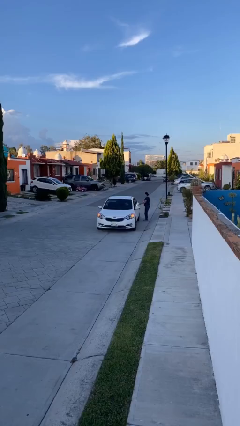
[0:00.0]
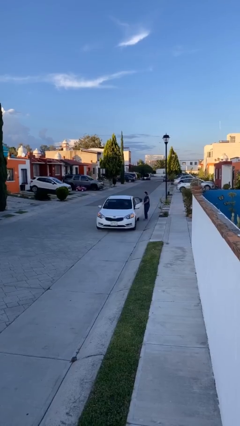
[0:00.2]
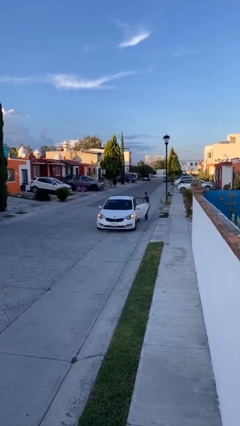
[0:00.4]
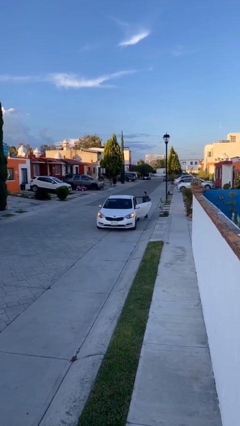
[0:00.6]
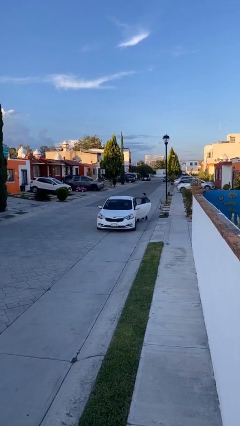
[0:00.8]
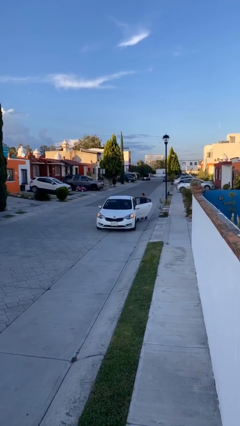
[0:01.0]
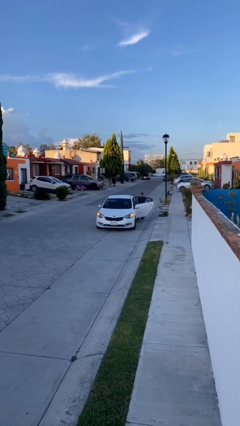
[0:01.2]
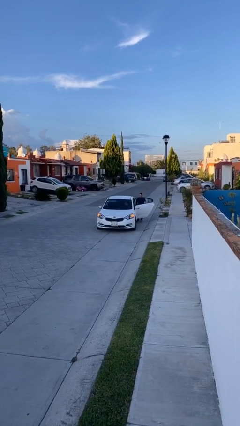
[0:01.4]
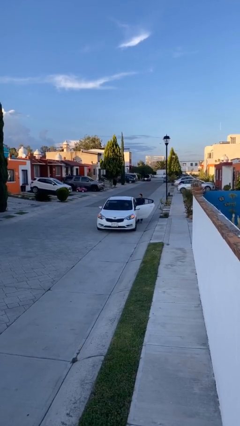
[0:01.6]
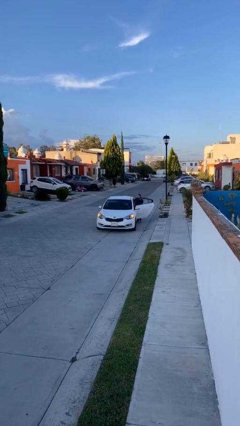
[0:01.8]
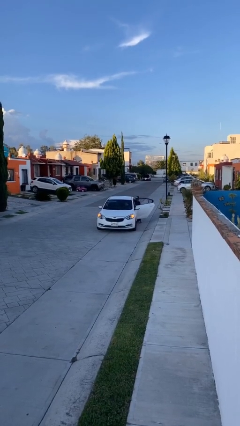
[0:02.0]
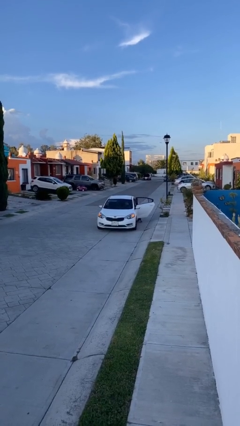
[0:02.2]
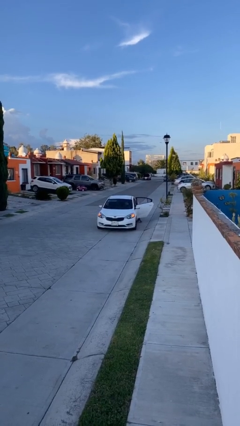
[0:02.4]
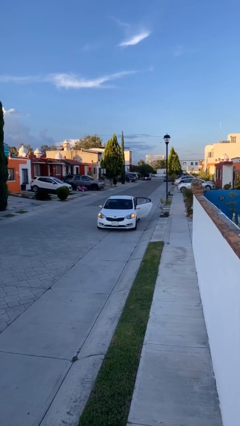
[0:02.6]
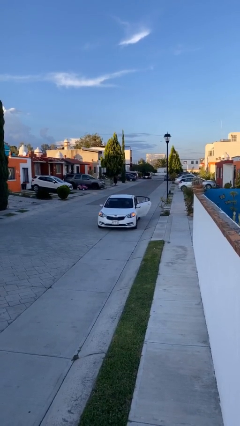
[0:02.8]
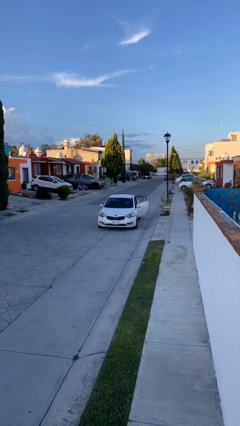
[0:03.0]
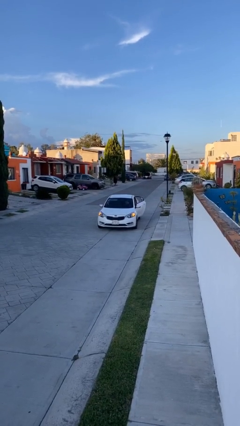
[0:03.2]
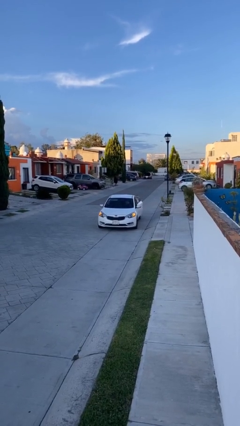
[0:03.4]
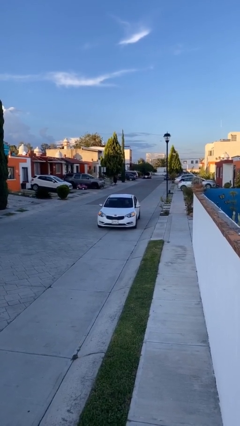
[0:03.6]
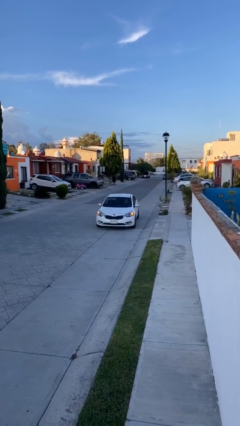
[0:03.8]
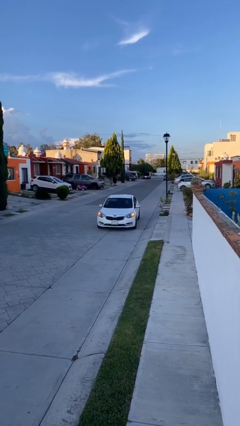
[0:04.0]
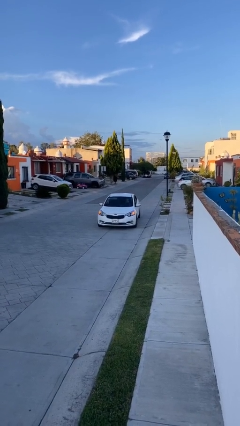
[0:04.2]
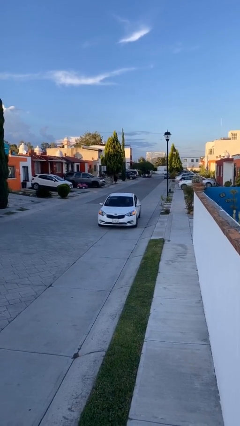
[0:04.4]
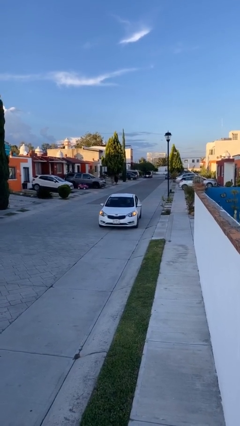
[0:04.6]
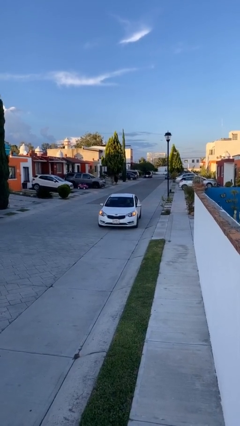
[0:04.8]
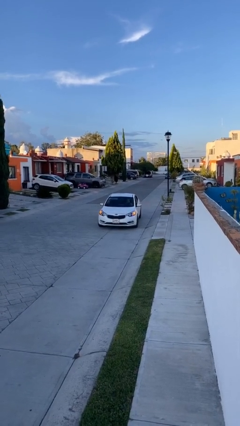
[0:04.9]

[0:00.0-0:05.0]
car picks up person

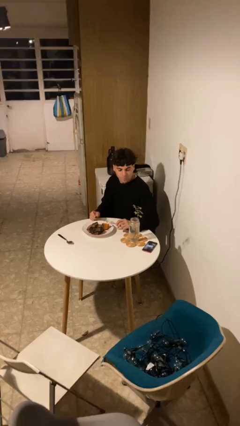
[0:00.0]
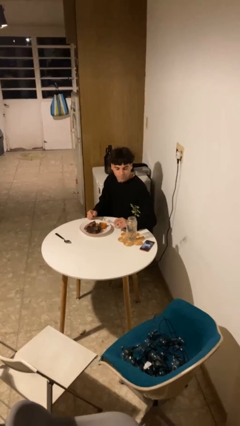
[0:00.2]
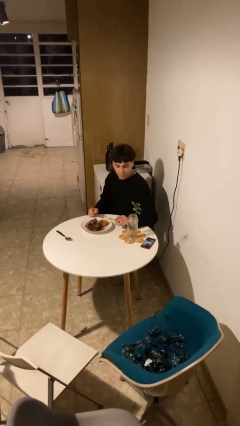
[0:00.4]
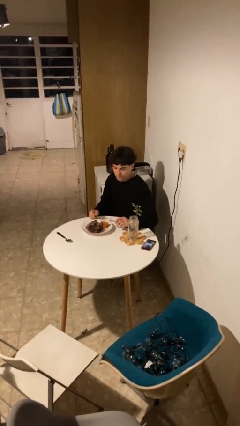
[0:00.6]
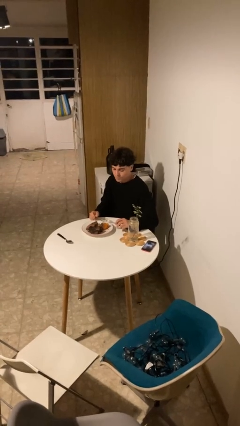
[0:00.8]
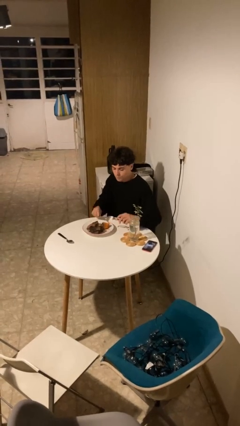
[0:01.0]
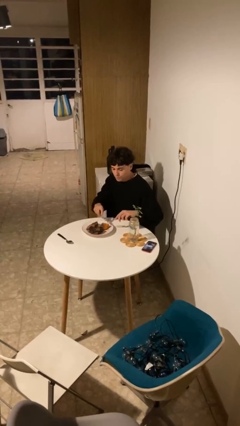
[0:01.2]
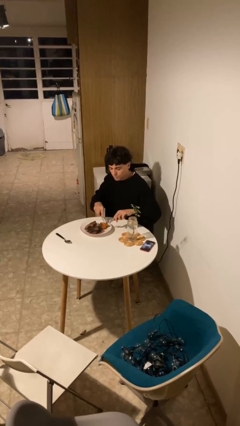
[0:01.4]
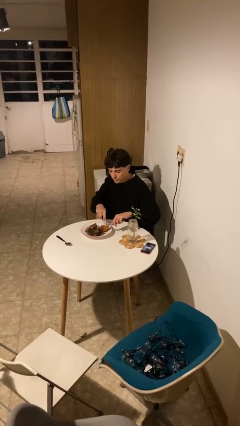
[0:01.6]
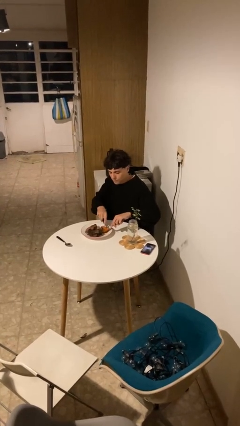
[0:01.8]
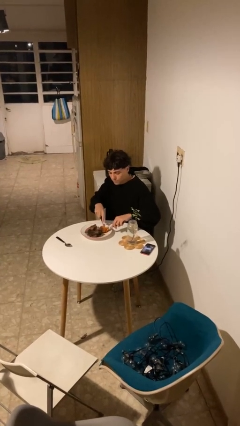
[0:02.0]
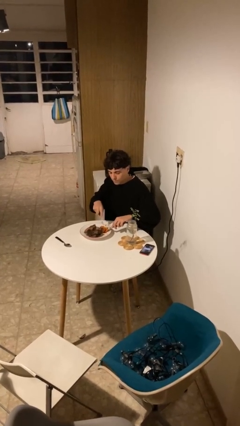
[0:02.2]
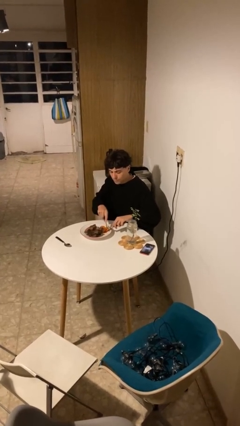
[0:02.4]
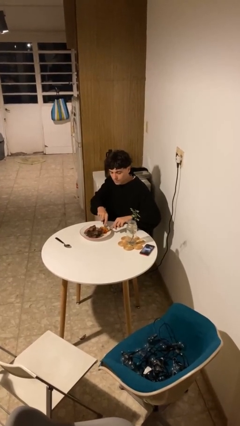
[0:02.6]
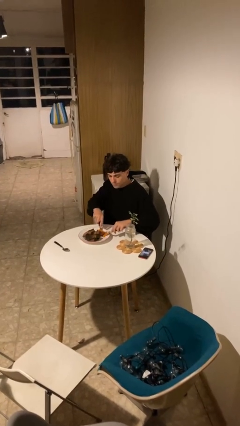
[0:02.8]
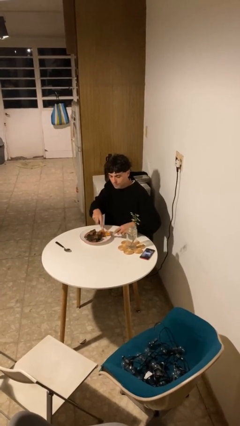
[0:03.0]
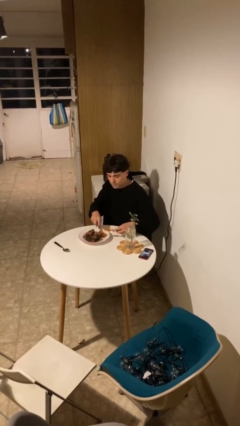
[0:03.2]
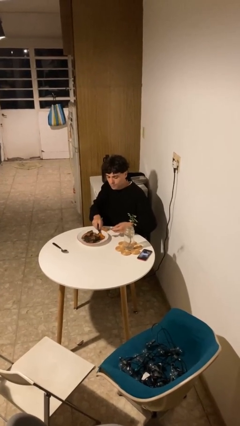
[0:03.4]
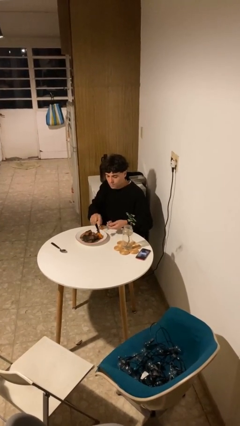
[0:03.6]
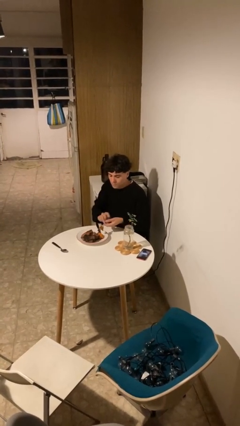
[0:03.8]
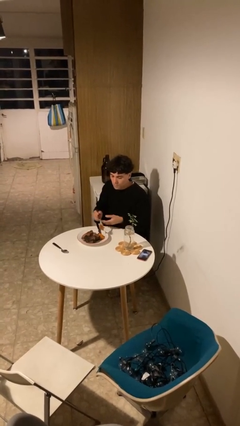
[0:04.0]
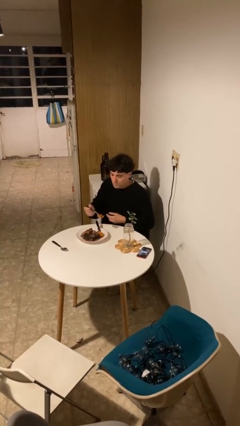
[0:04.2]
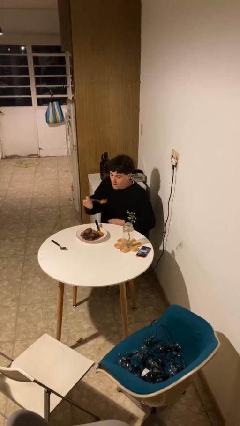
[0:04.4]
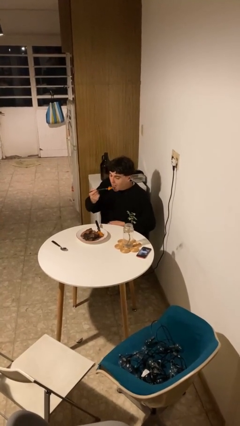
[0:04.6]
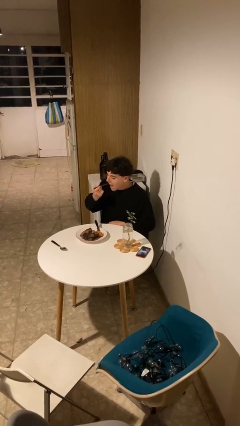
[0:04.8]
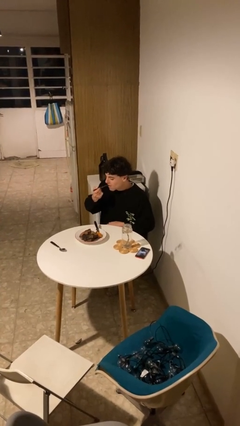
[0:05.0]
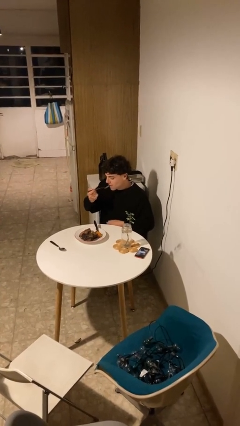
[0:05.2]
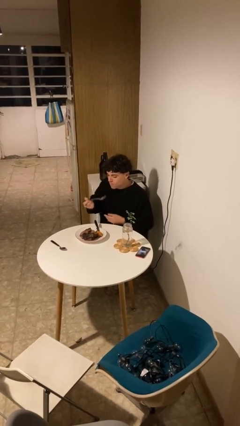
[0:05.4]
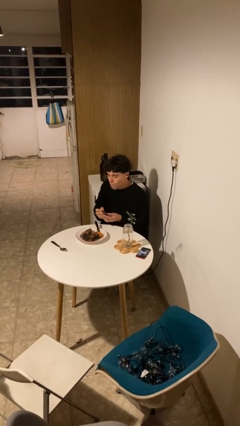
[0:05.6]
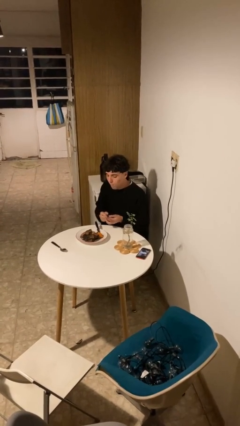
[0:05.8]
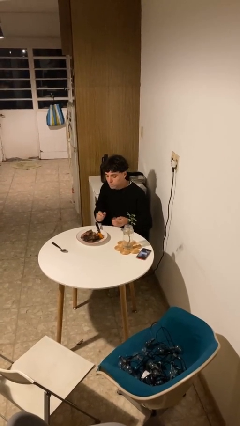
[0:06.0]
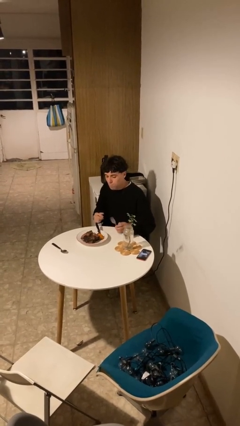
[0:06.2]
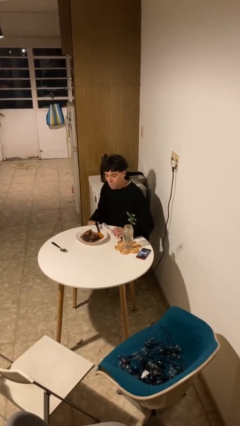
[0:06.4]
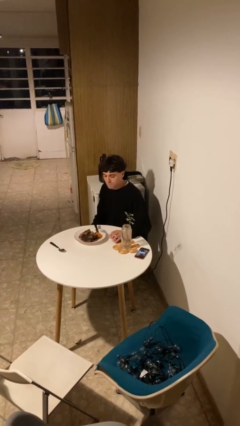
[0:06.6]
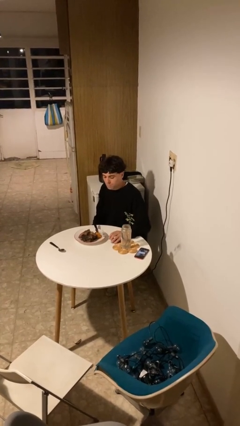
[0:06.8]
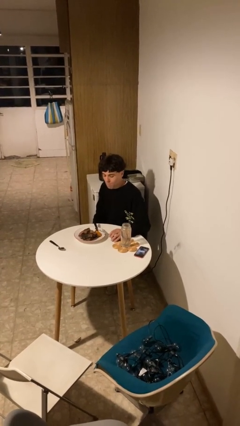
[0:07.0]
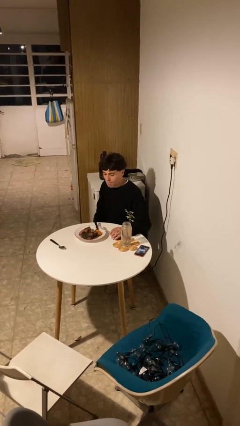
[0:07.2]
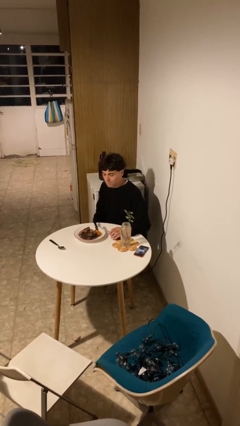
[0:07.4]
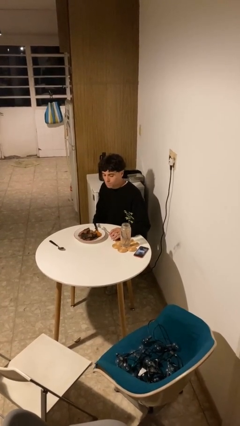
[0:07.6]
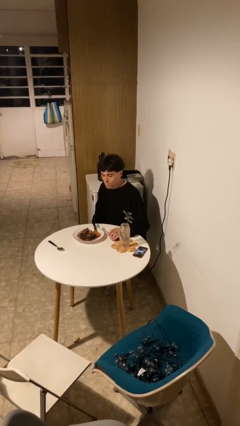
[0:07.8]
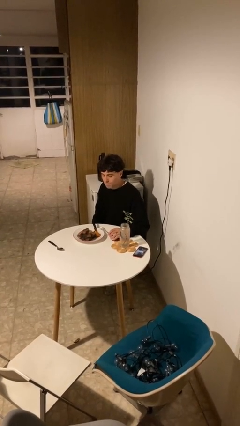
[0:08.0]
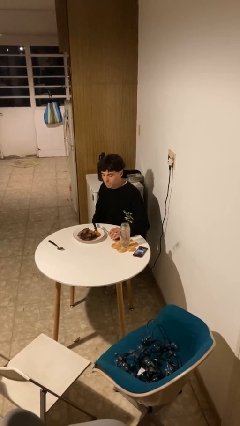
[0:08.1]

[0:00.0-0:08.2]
person eats with utensil

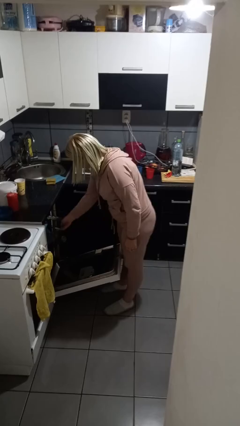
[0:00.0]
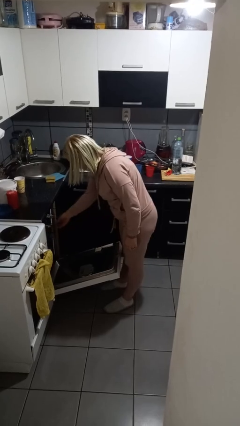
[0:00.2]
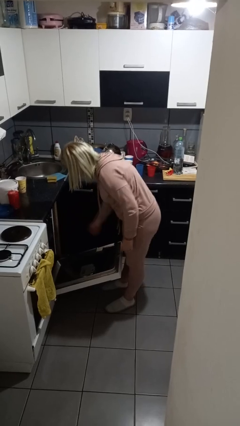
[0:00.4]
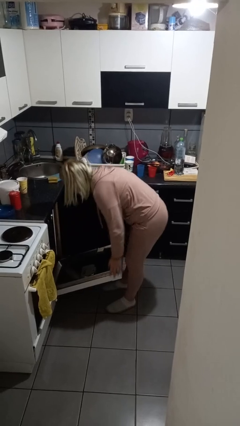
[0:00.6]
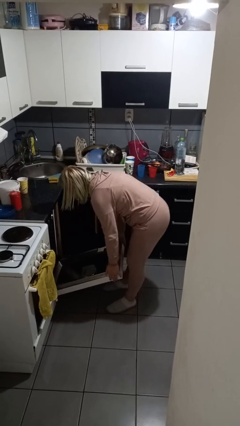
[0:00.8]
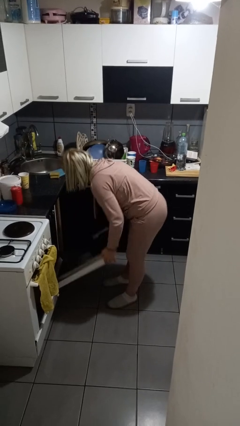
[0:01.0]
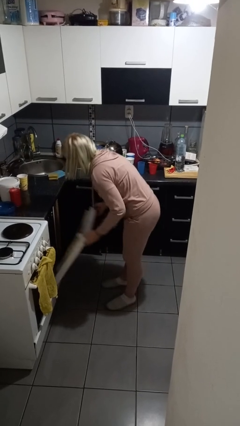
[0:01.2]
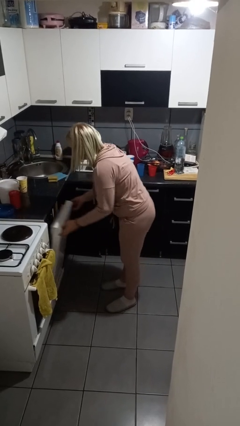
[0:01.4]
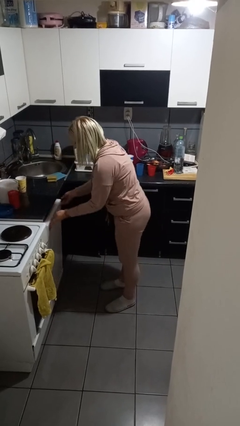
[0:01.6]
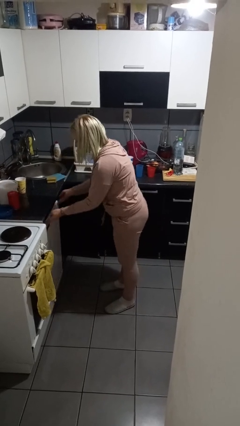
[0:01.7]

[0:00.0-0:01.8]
person closes dishwasher

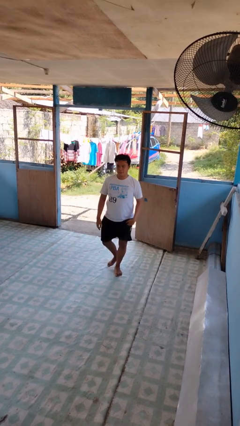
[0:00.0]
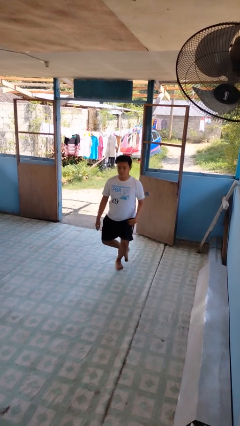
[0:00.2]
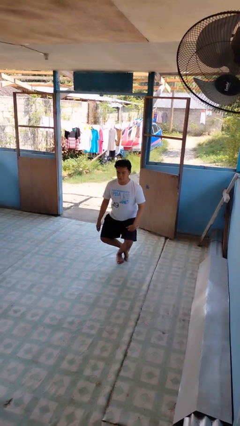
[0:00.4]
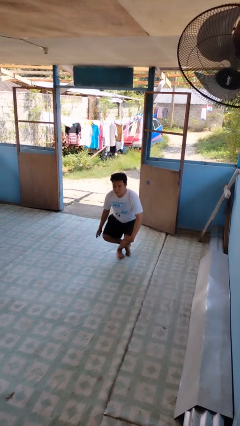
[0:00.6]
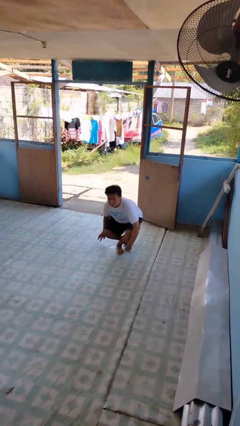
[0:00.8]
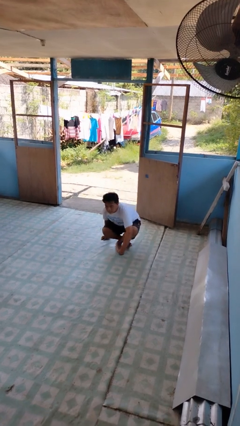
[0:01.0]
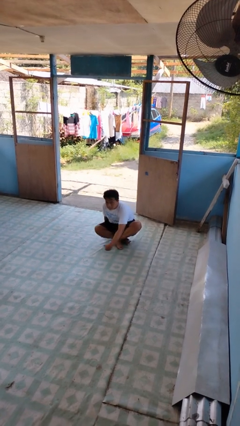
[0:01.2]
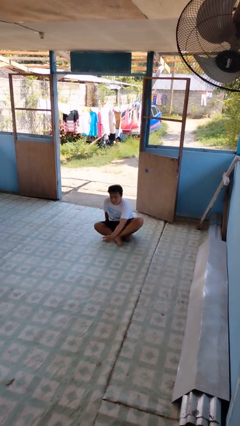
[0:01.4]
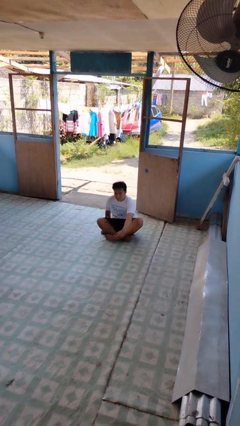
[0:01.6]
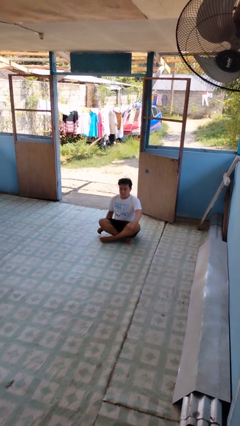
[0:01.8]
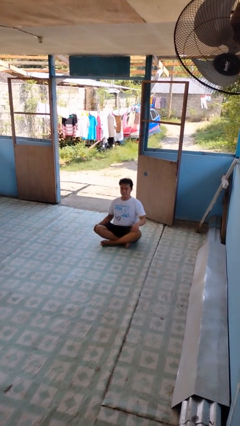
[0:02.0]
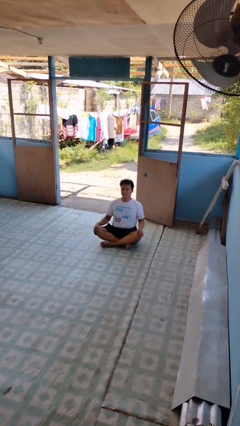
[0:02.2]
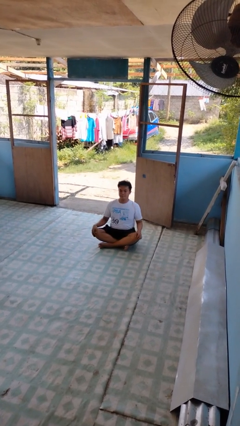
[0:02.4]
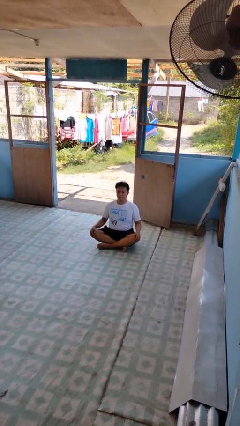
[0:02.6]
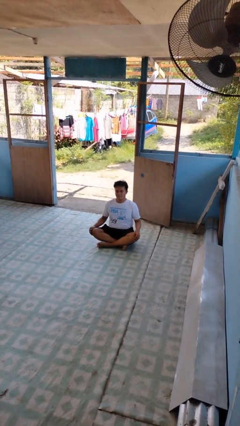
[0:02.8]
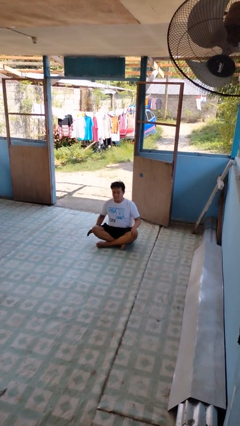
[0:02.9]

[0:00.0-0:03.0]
person sits crisscross
